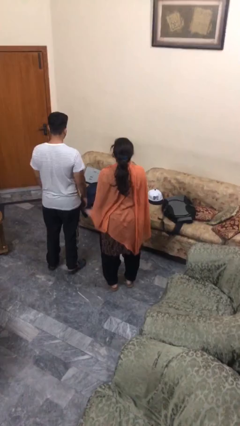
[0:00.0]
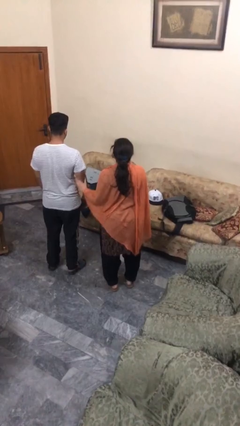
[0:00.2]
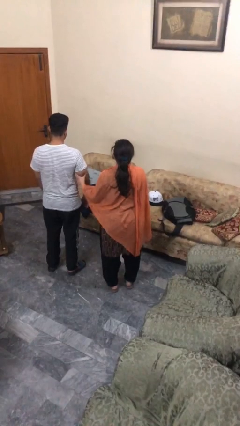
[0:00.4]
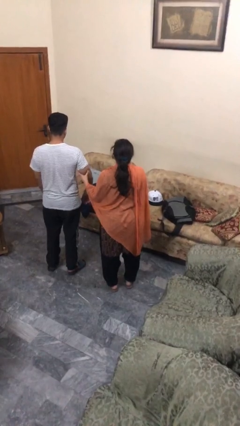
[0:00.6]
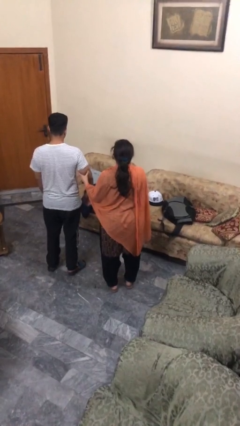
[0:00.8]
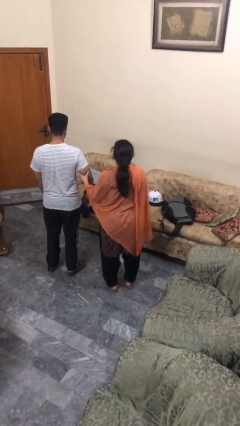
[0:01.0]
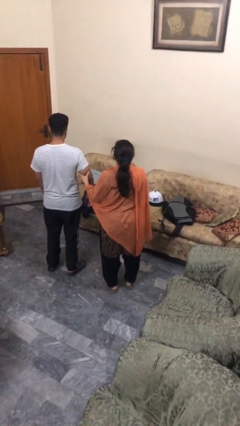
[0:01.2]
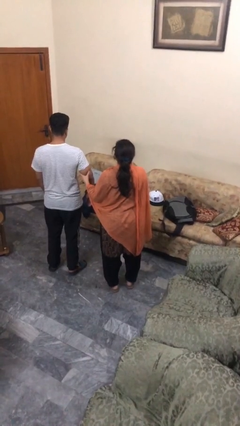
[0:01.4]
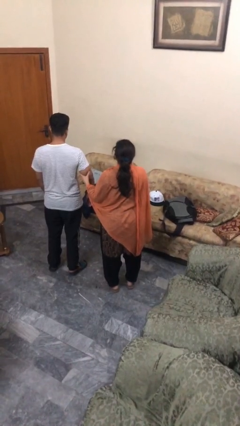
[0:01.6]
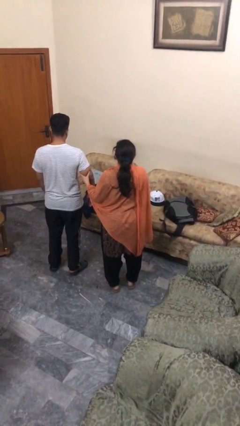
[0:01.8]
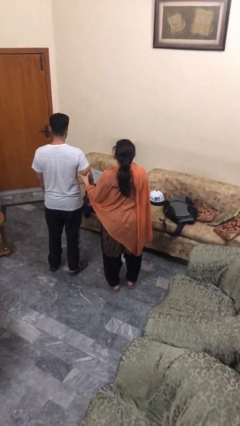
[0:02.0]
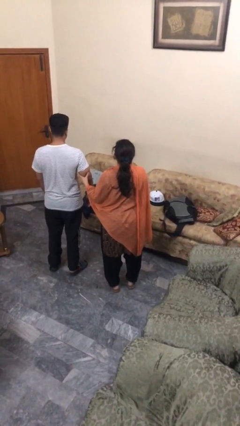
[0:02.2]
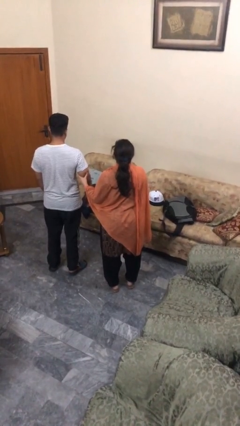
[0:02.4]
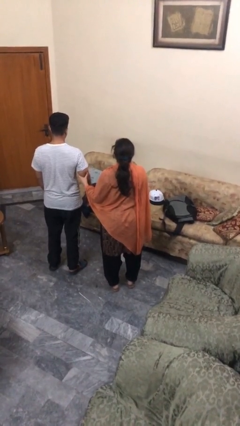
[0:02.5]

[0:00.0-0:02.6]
person grabs person by bicep

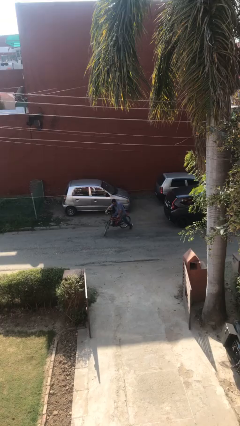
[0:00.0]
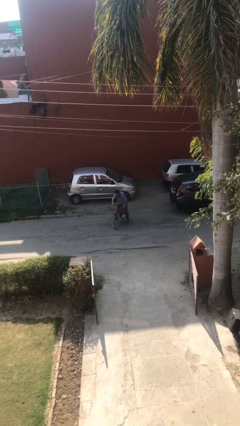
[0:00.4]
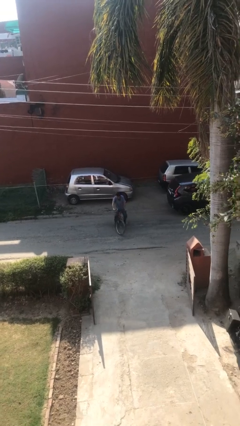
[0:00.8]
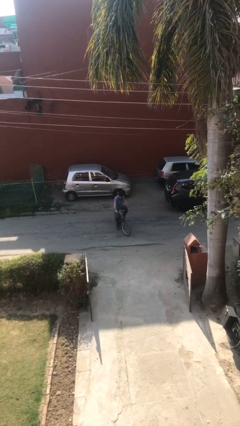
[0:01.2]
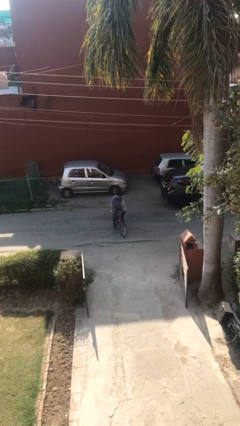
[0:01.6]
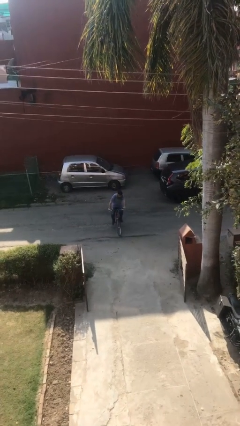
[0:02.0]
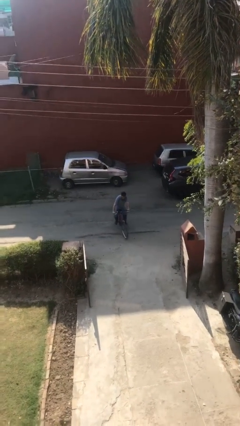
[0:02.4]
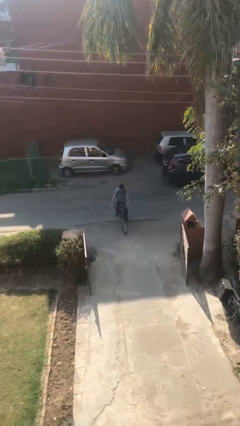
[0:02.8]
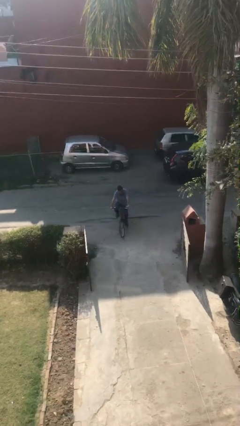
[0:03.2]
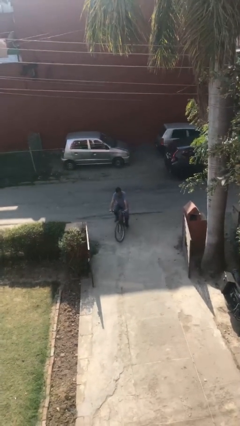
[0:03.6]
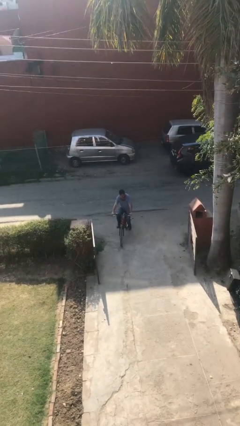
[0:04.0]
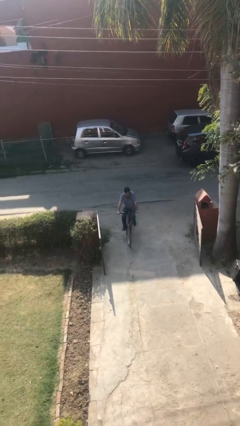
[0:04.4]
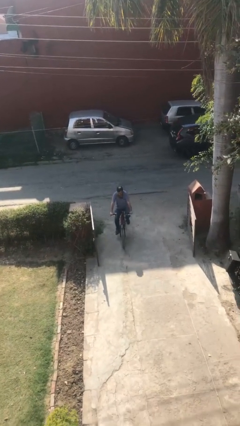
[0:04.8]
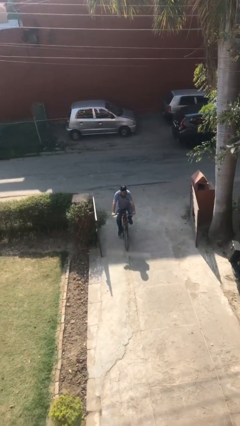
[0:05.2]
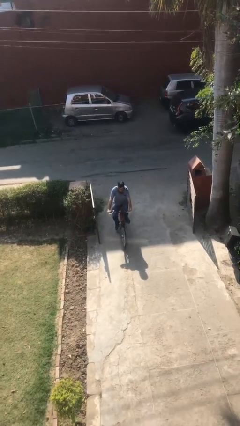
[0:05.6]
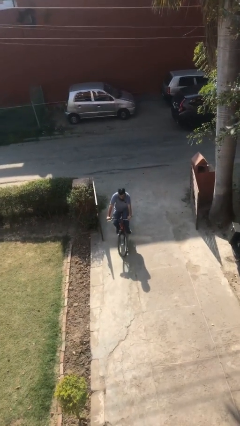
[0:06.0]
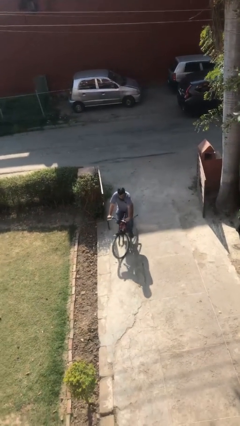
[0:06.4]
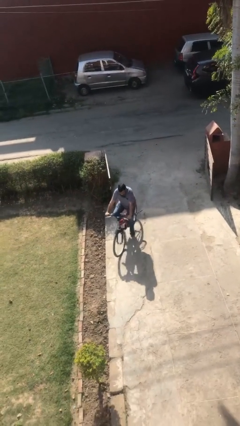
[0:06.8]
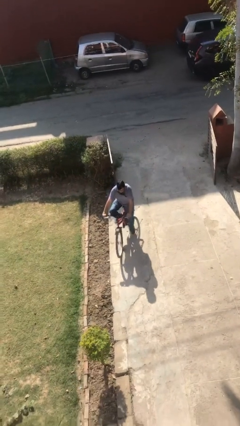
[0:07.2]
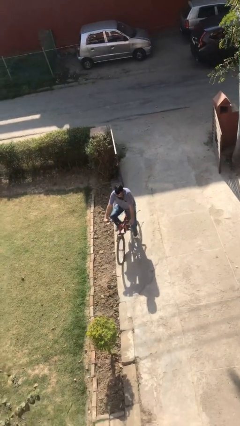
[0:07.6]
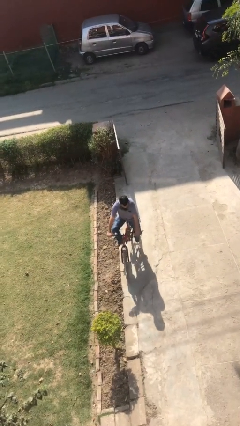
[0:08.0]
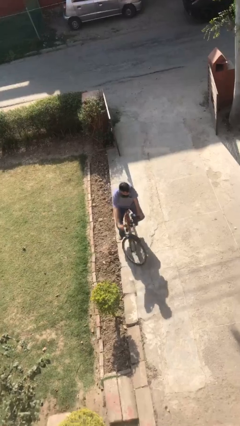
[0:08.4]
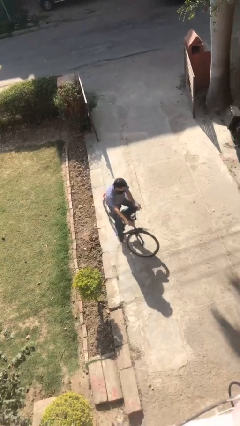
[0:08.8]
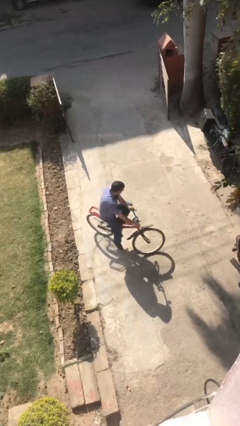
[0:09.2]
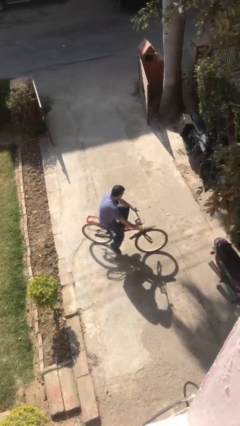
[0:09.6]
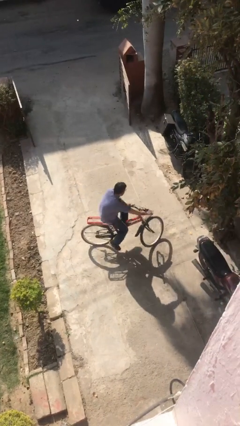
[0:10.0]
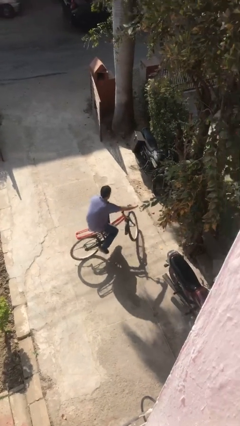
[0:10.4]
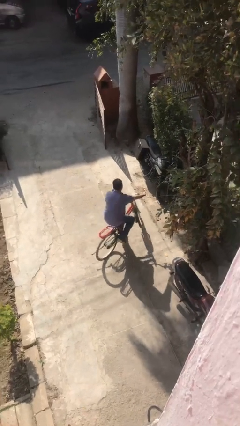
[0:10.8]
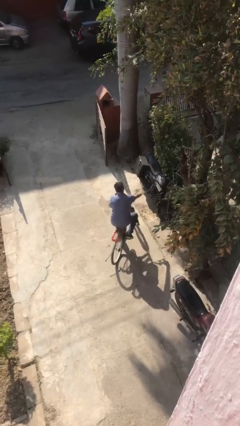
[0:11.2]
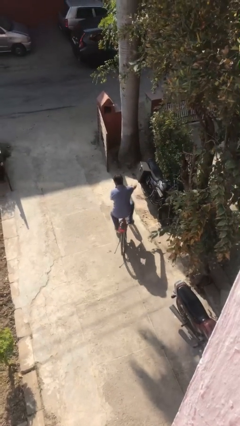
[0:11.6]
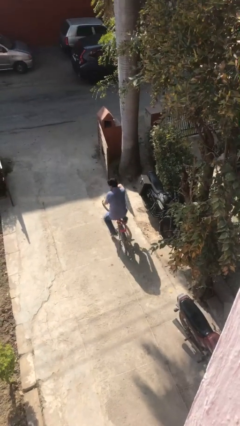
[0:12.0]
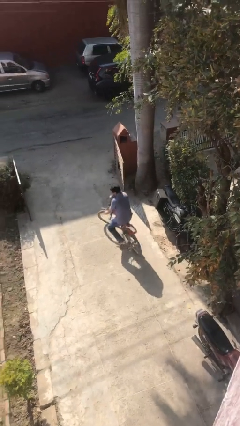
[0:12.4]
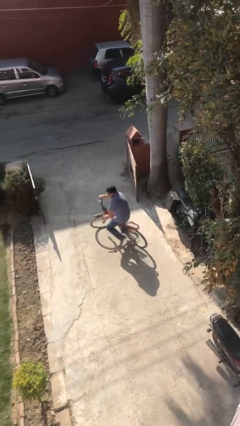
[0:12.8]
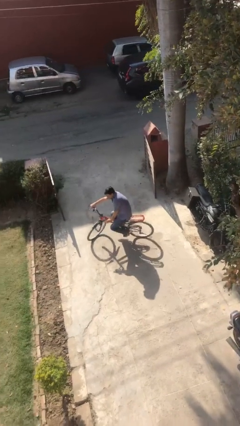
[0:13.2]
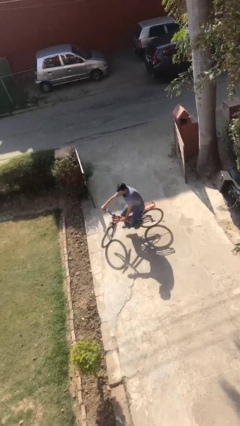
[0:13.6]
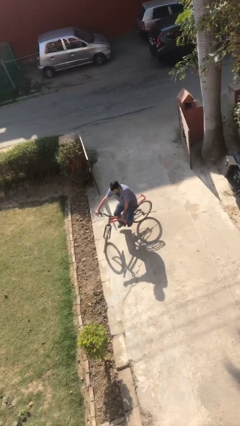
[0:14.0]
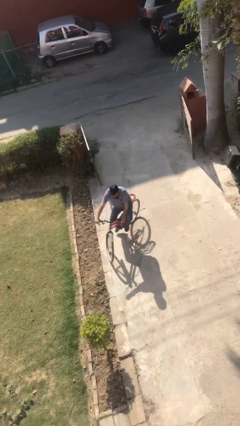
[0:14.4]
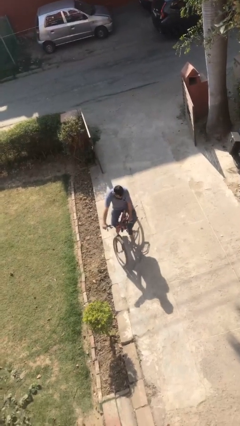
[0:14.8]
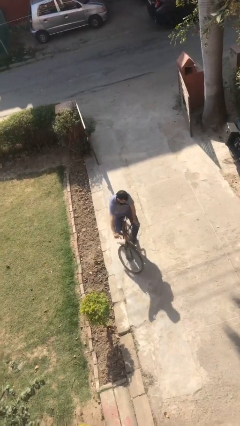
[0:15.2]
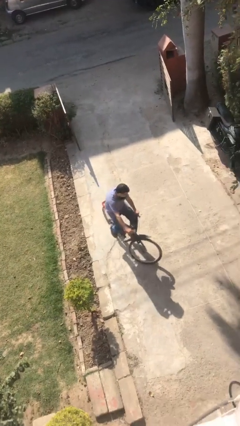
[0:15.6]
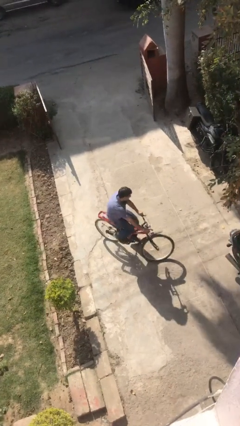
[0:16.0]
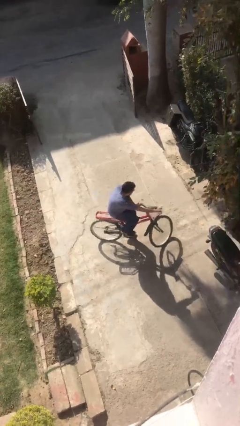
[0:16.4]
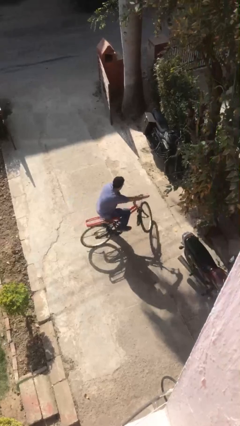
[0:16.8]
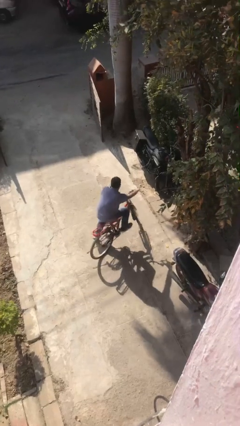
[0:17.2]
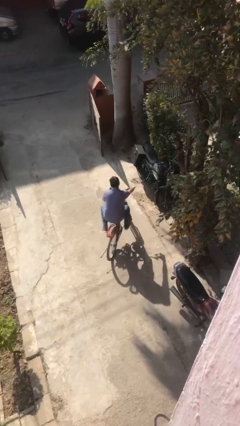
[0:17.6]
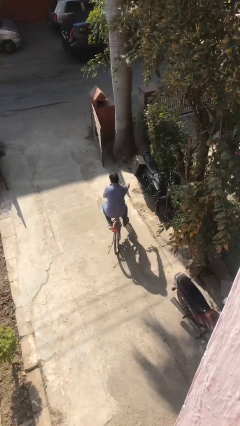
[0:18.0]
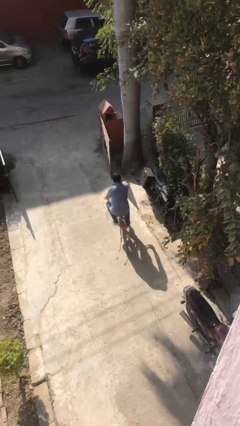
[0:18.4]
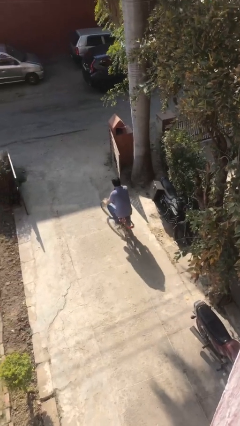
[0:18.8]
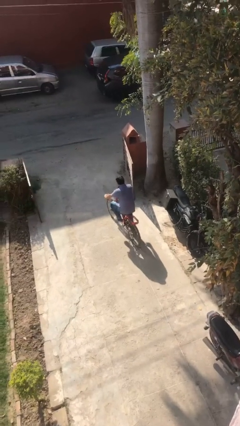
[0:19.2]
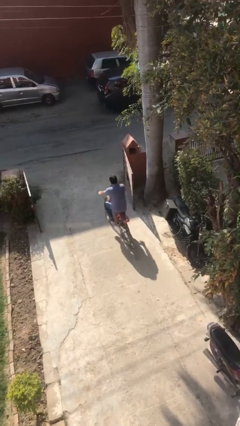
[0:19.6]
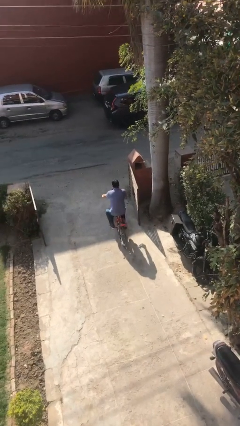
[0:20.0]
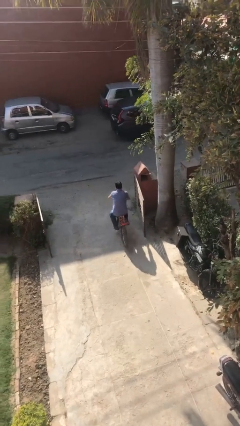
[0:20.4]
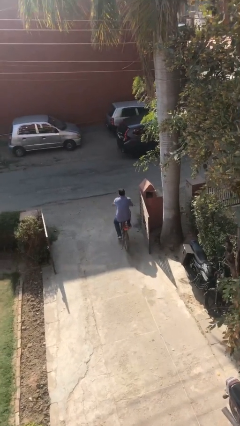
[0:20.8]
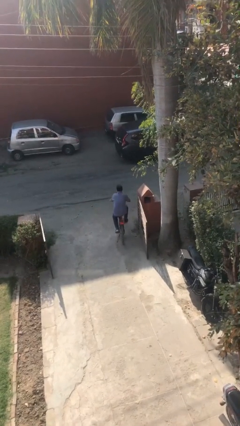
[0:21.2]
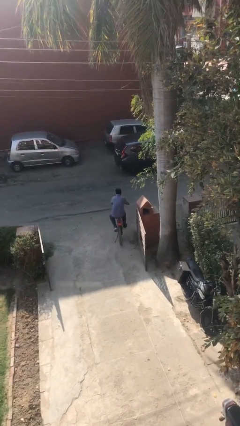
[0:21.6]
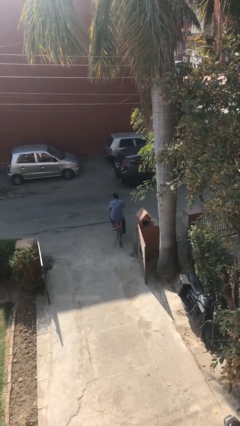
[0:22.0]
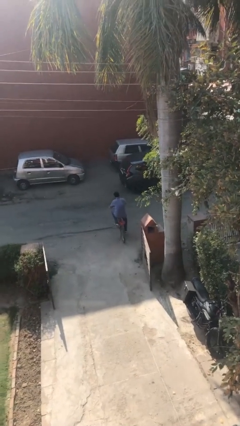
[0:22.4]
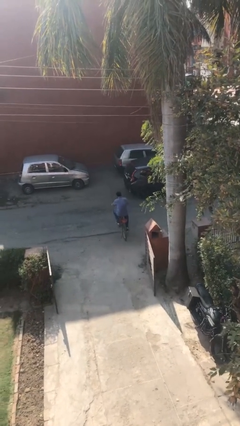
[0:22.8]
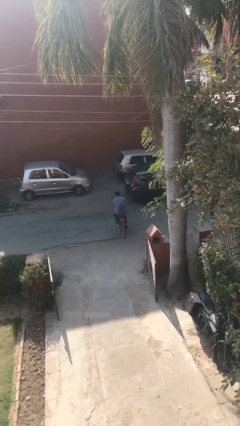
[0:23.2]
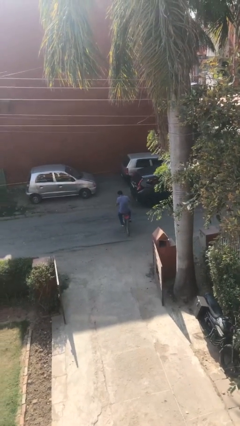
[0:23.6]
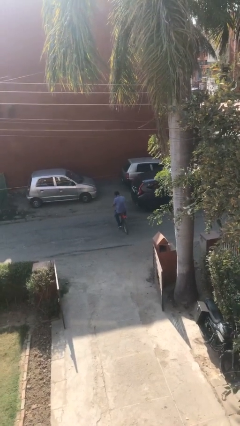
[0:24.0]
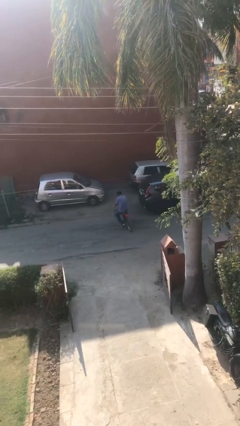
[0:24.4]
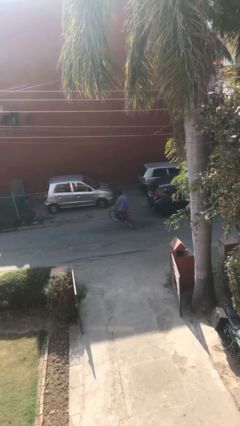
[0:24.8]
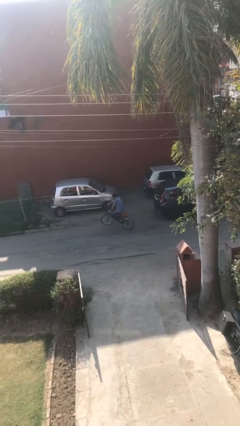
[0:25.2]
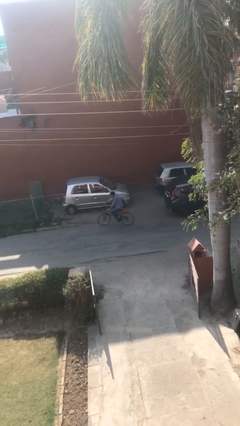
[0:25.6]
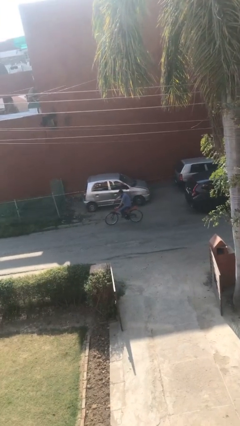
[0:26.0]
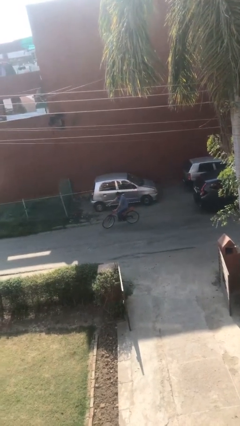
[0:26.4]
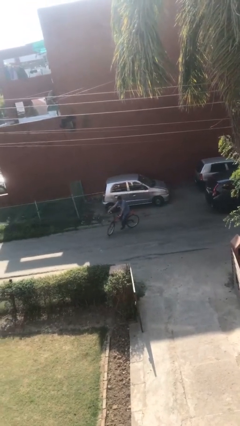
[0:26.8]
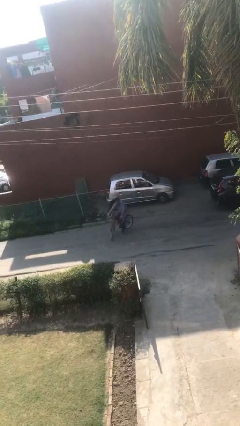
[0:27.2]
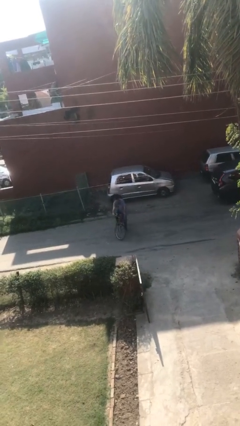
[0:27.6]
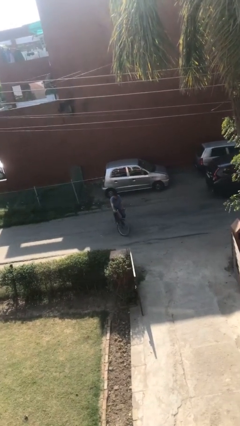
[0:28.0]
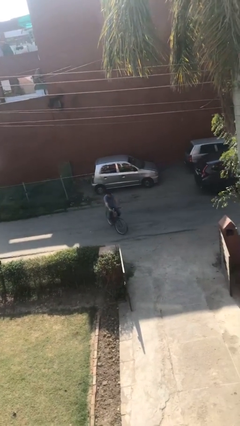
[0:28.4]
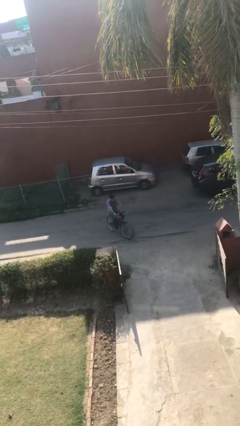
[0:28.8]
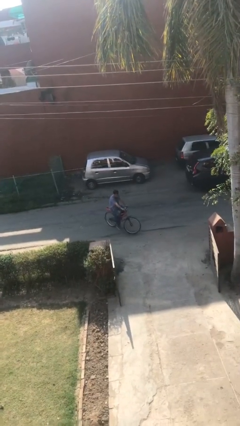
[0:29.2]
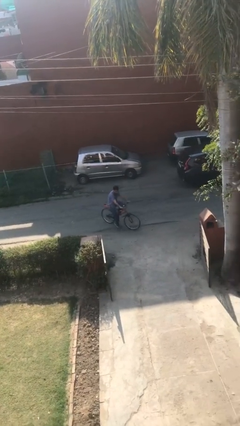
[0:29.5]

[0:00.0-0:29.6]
person rides bicycle

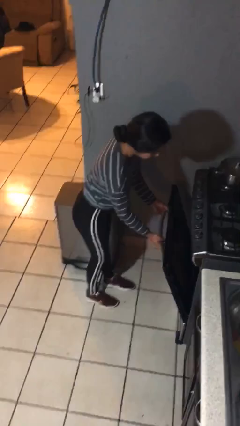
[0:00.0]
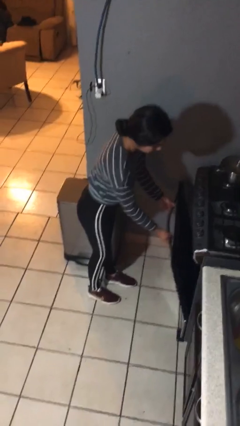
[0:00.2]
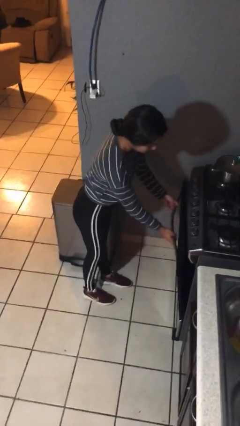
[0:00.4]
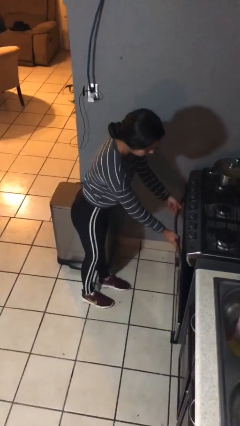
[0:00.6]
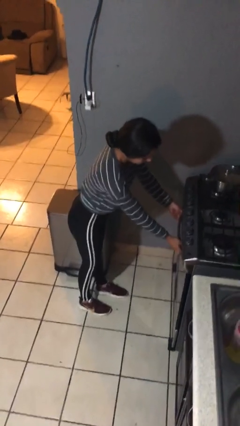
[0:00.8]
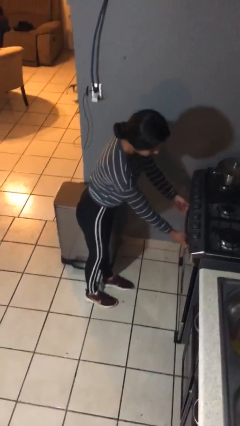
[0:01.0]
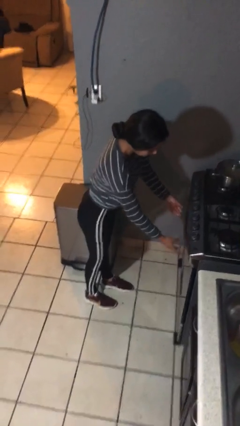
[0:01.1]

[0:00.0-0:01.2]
person closes oven door
